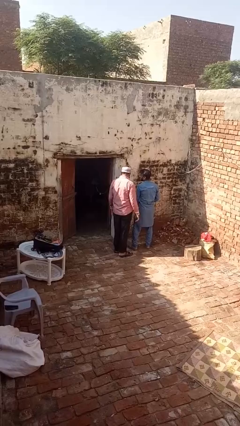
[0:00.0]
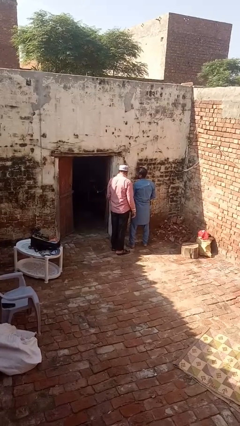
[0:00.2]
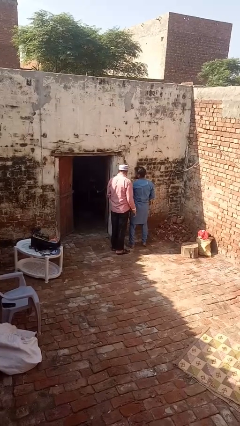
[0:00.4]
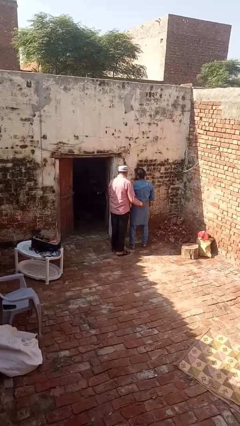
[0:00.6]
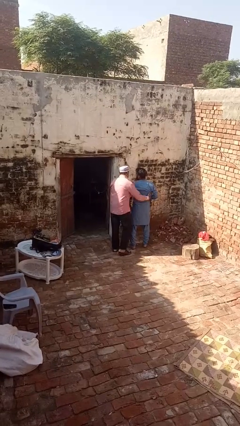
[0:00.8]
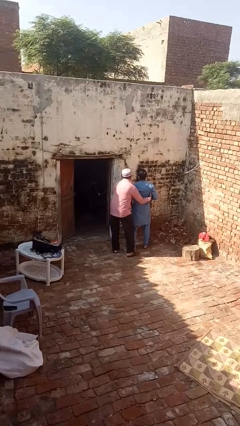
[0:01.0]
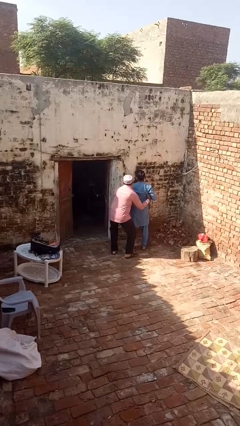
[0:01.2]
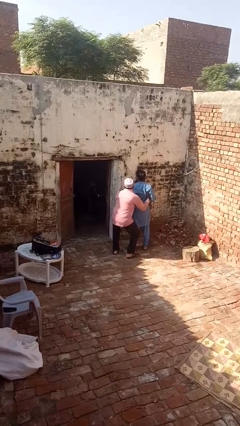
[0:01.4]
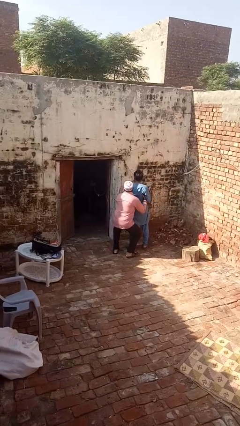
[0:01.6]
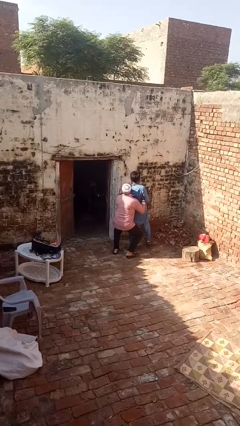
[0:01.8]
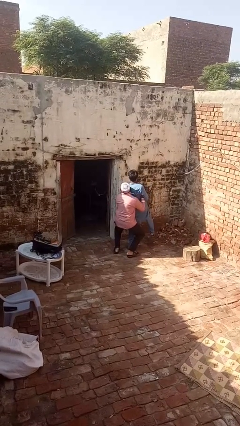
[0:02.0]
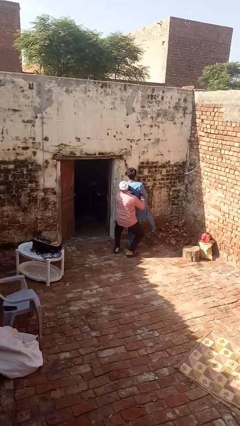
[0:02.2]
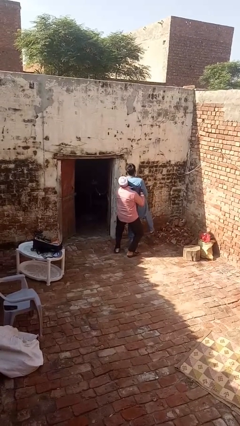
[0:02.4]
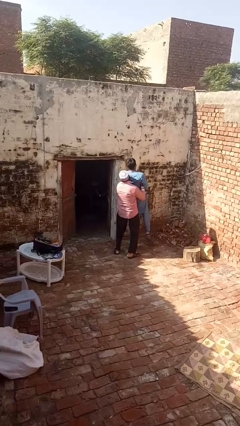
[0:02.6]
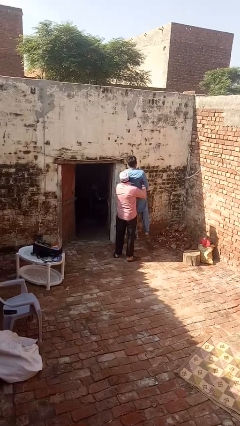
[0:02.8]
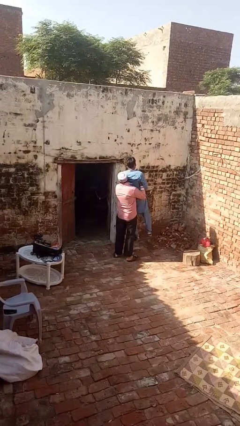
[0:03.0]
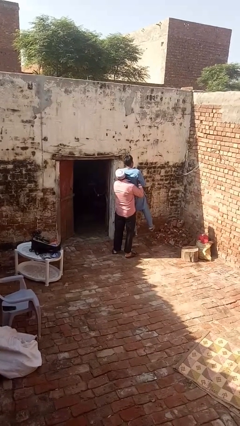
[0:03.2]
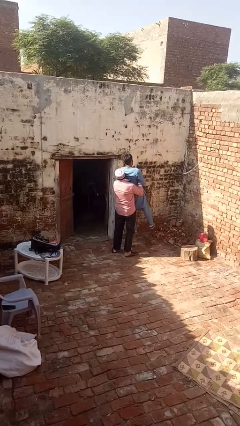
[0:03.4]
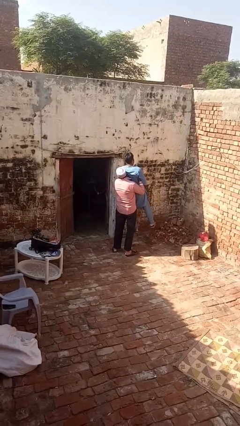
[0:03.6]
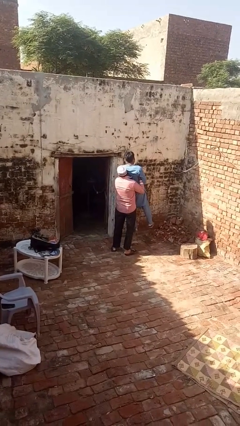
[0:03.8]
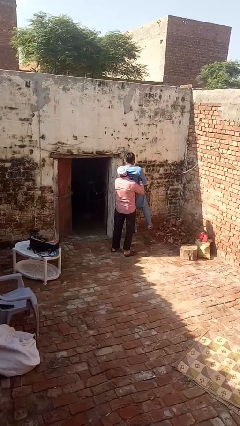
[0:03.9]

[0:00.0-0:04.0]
person picks up person

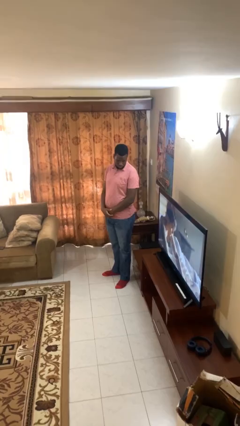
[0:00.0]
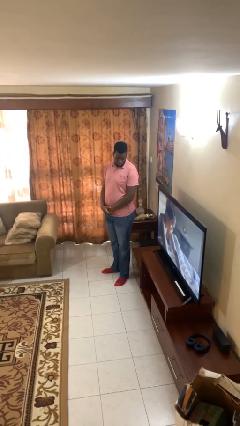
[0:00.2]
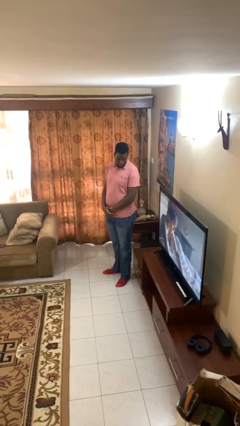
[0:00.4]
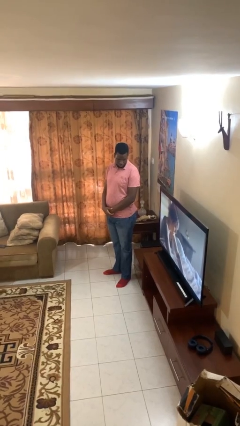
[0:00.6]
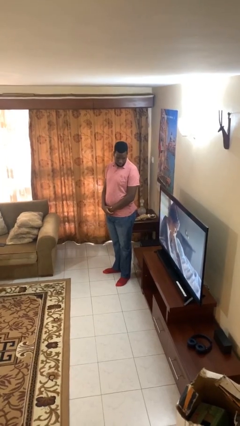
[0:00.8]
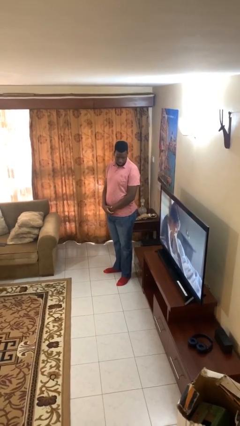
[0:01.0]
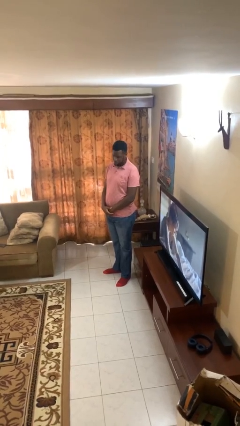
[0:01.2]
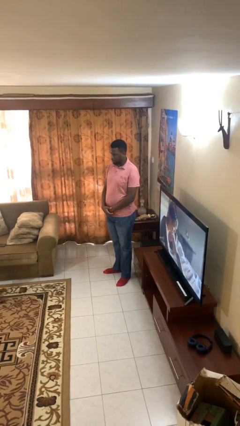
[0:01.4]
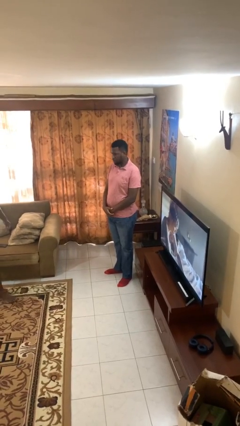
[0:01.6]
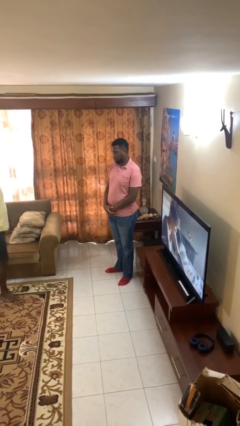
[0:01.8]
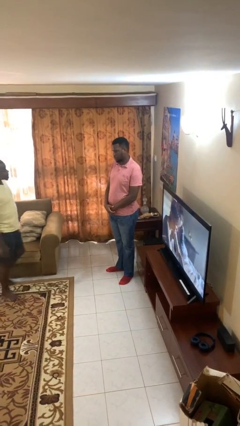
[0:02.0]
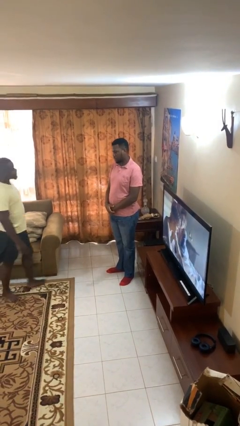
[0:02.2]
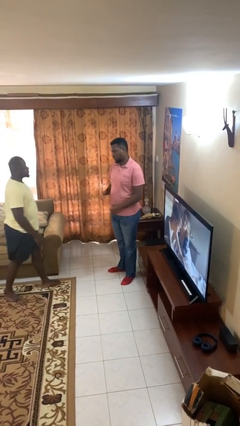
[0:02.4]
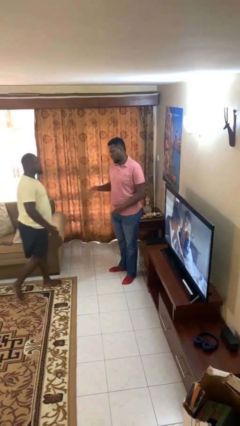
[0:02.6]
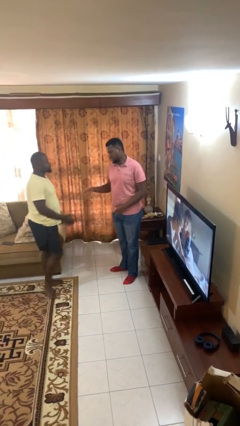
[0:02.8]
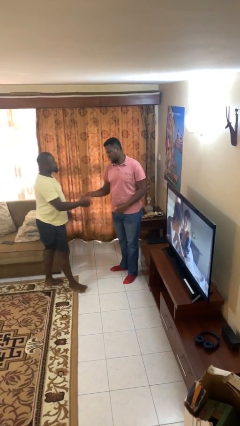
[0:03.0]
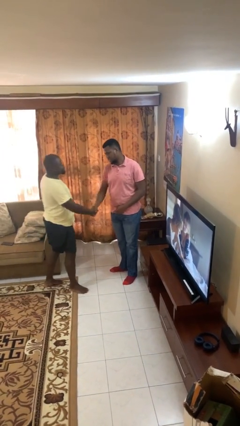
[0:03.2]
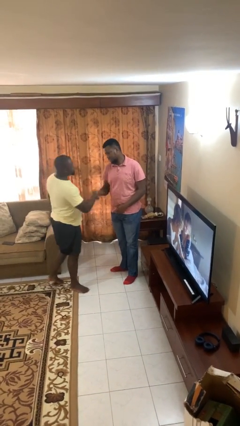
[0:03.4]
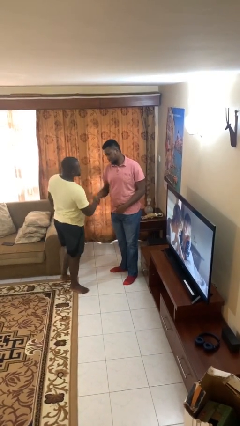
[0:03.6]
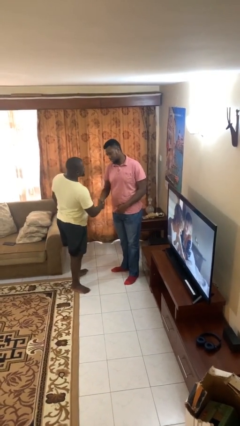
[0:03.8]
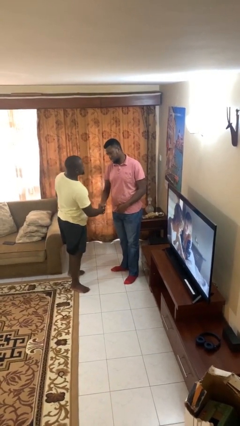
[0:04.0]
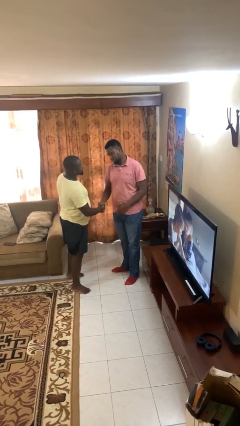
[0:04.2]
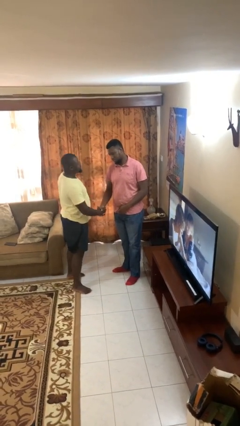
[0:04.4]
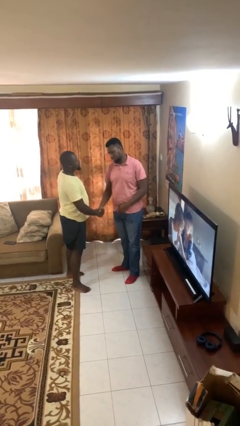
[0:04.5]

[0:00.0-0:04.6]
person shakes hand

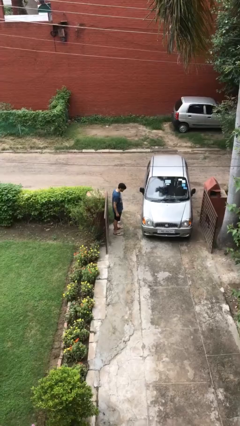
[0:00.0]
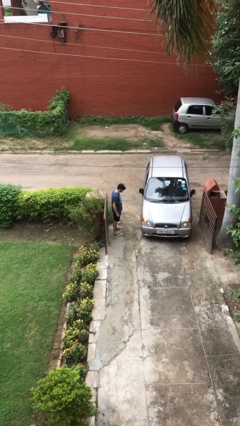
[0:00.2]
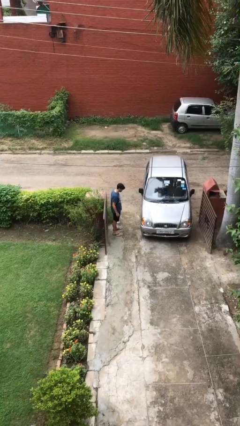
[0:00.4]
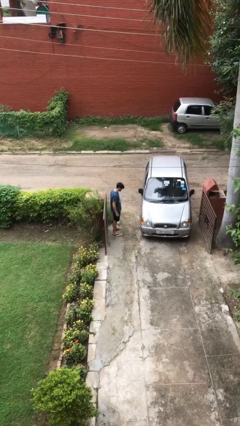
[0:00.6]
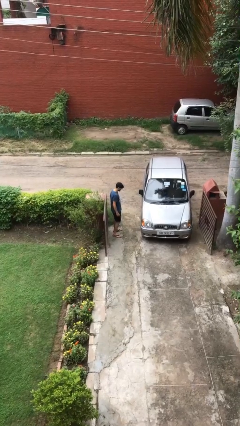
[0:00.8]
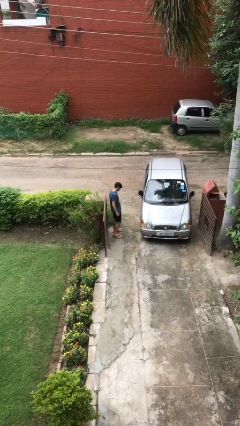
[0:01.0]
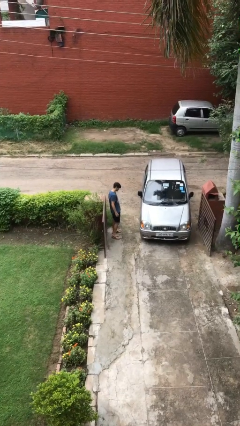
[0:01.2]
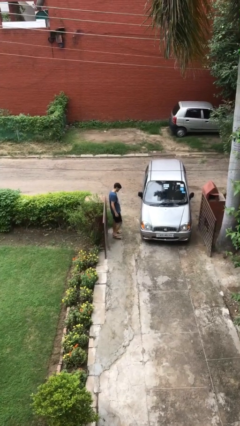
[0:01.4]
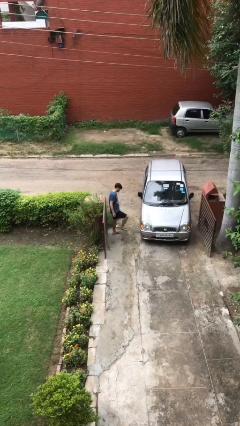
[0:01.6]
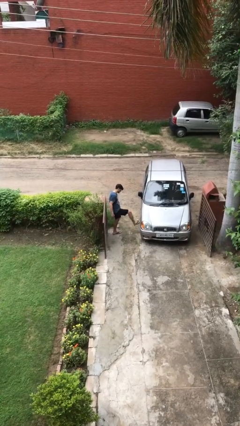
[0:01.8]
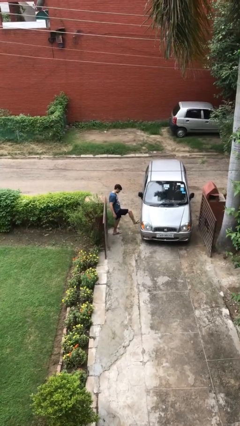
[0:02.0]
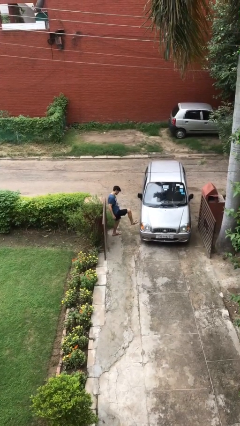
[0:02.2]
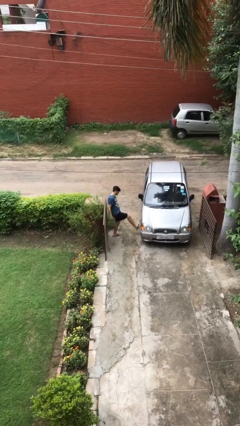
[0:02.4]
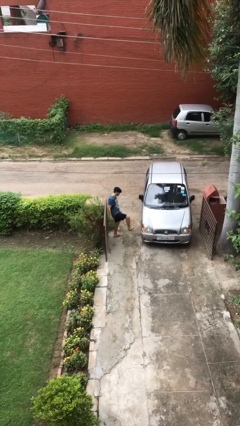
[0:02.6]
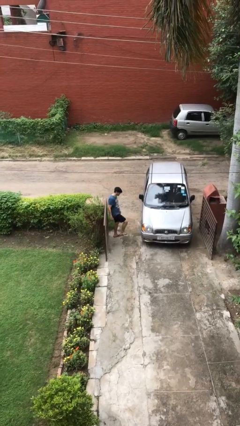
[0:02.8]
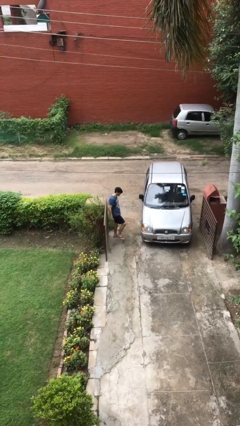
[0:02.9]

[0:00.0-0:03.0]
person kicks car tires

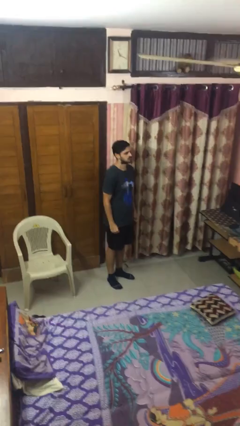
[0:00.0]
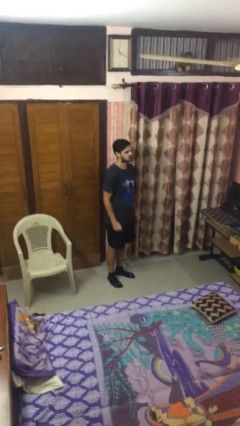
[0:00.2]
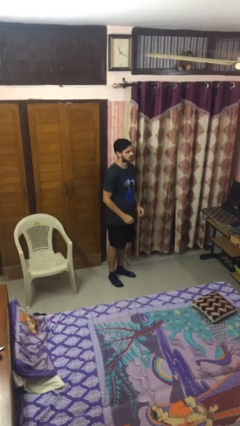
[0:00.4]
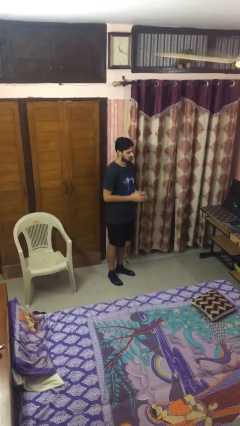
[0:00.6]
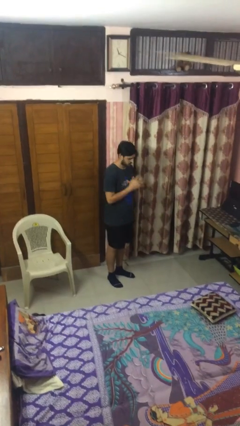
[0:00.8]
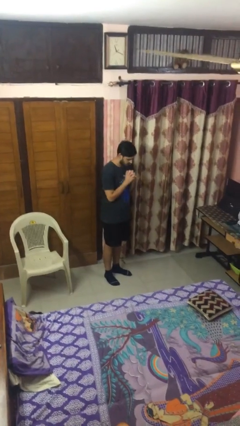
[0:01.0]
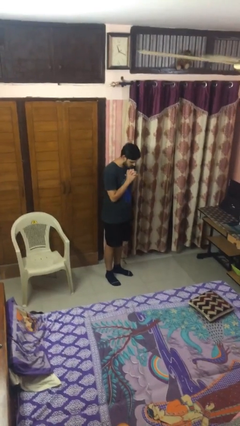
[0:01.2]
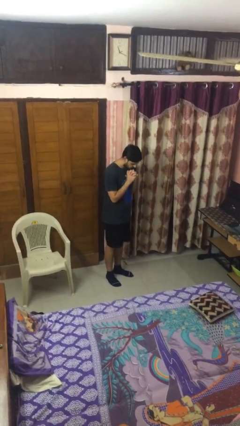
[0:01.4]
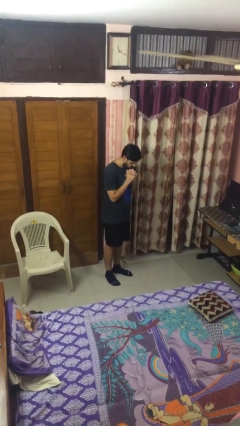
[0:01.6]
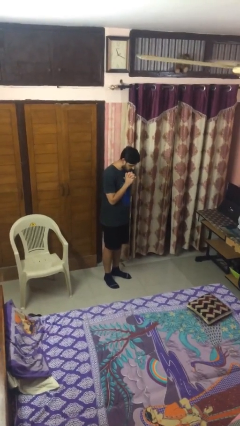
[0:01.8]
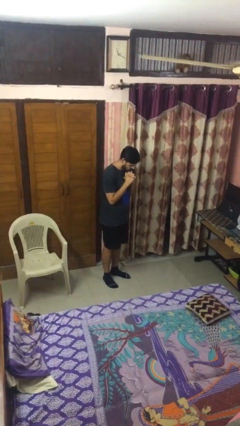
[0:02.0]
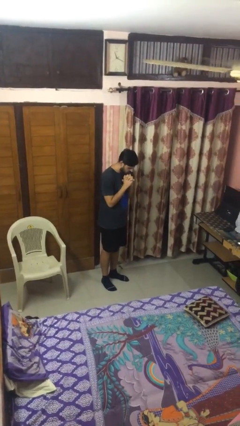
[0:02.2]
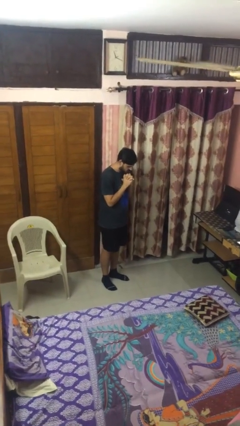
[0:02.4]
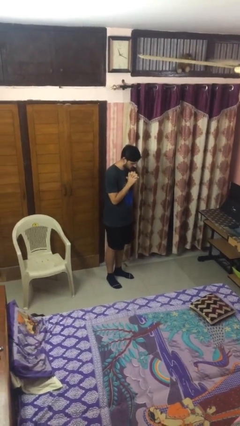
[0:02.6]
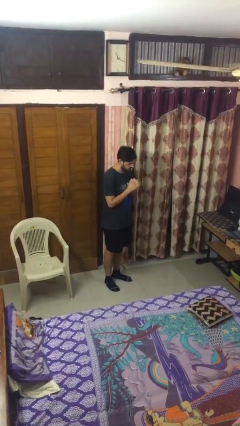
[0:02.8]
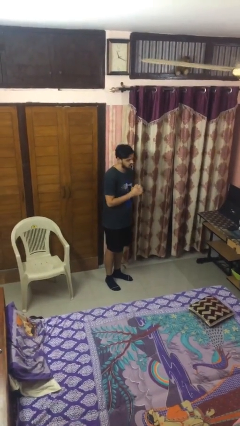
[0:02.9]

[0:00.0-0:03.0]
person prays

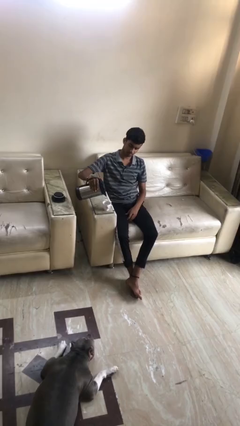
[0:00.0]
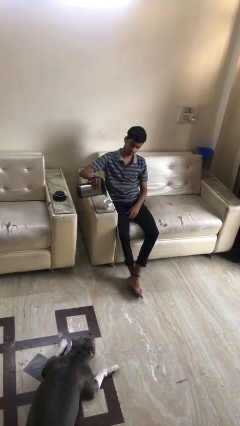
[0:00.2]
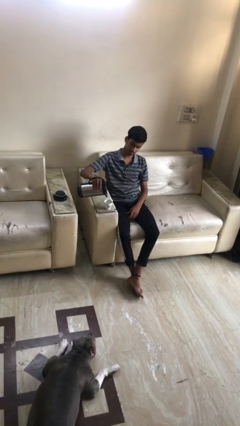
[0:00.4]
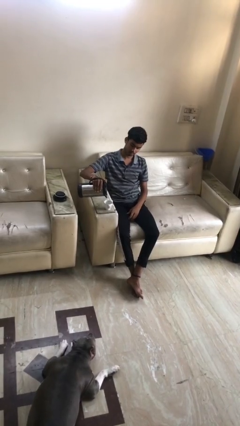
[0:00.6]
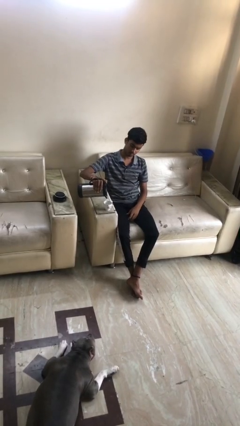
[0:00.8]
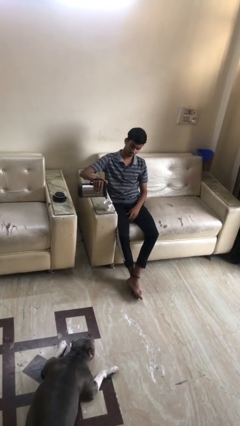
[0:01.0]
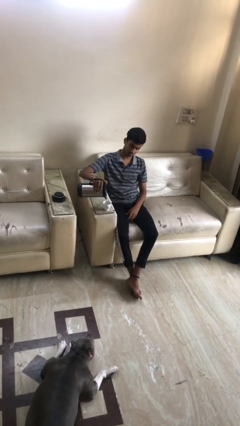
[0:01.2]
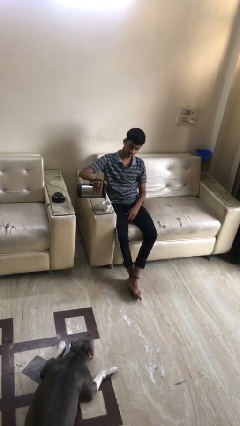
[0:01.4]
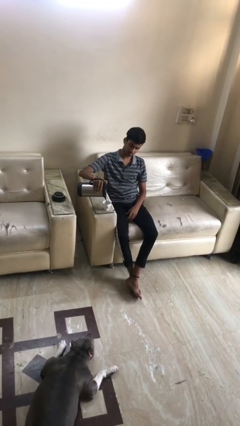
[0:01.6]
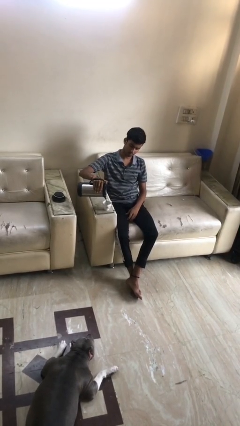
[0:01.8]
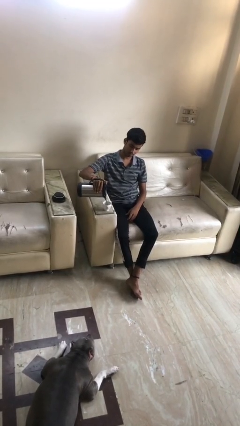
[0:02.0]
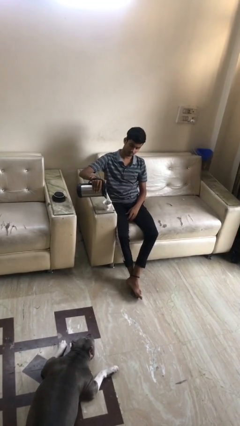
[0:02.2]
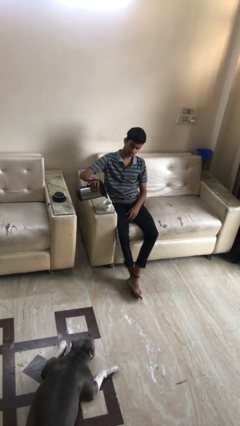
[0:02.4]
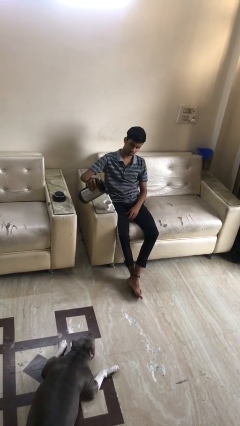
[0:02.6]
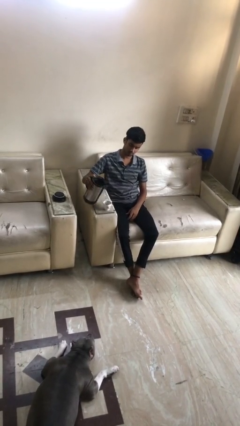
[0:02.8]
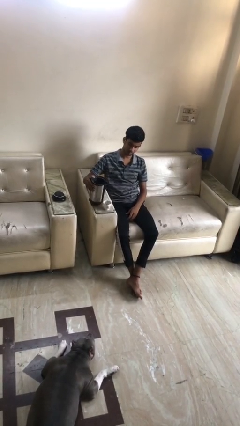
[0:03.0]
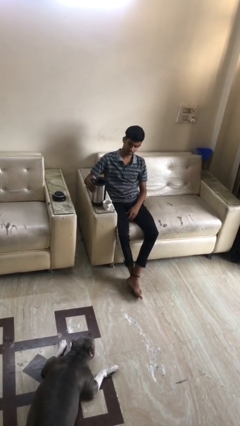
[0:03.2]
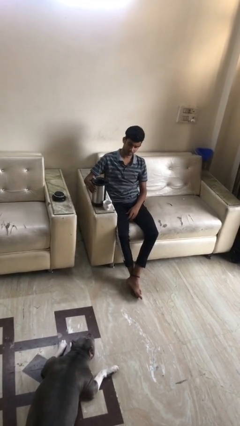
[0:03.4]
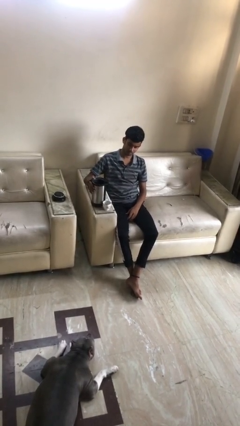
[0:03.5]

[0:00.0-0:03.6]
person pours coffee into mug
